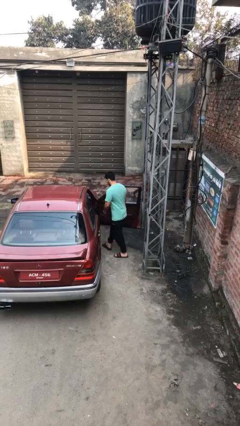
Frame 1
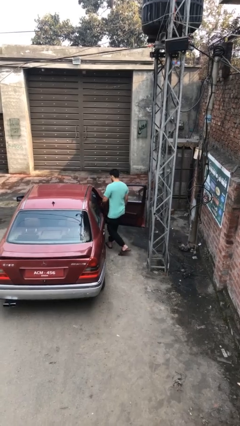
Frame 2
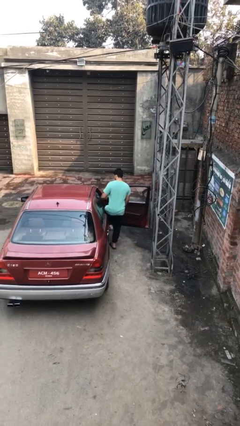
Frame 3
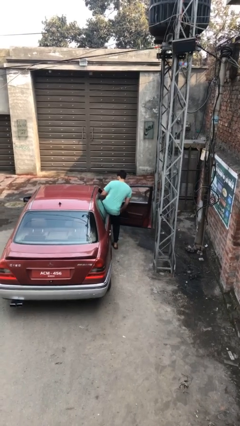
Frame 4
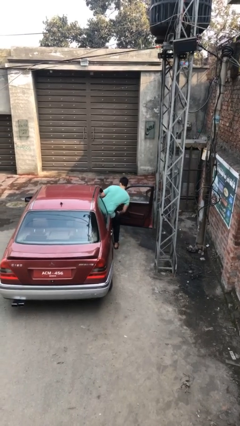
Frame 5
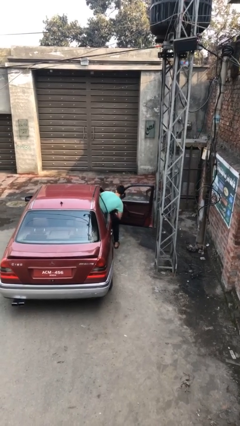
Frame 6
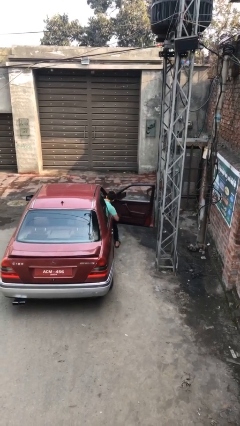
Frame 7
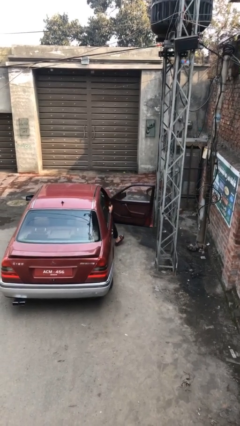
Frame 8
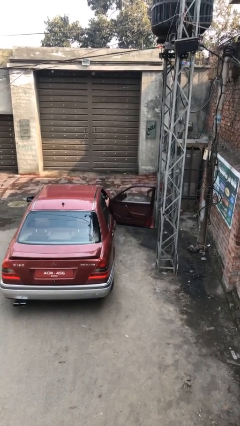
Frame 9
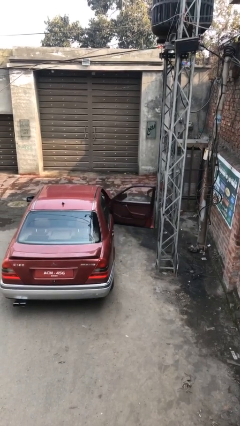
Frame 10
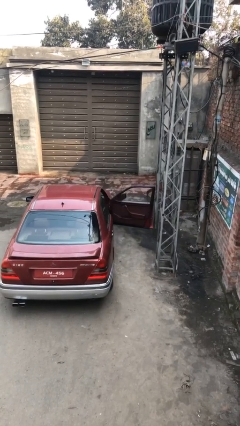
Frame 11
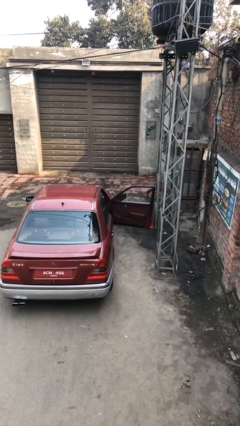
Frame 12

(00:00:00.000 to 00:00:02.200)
person enters car

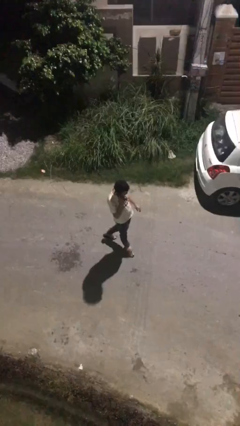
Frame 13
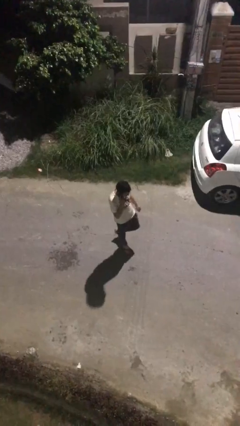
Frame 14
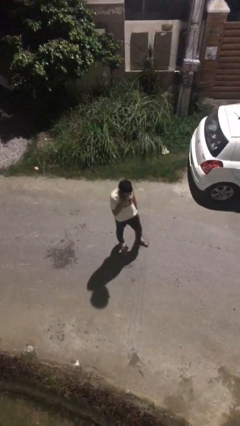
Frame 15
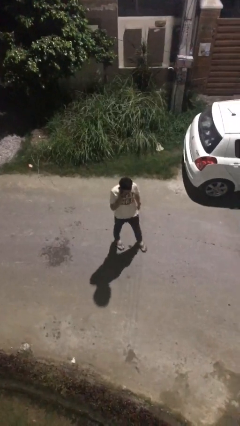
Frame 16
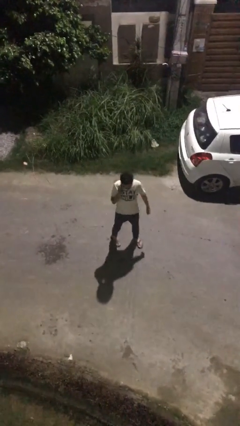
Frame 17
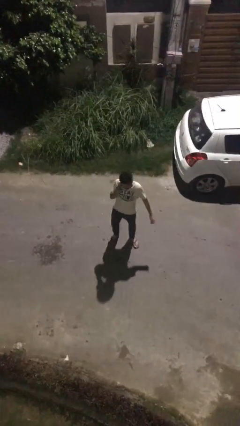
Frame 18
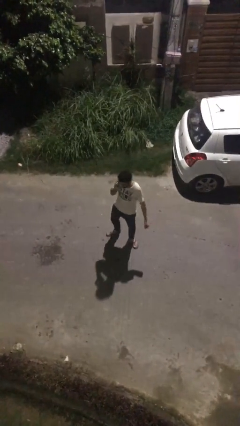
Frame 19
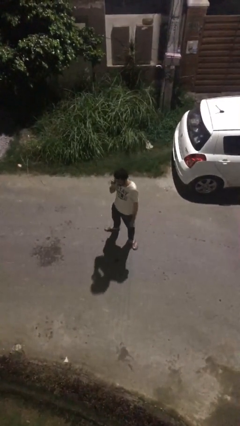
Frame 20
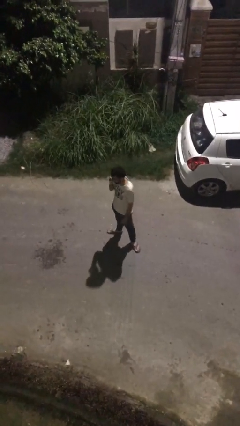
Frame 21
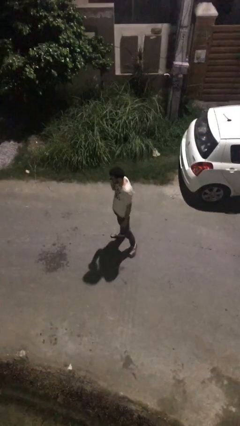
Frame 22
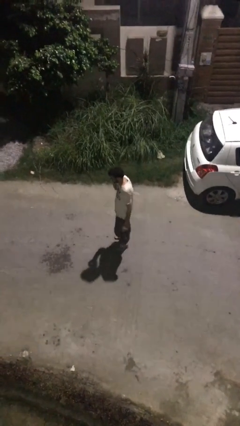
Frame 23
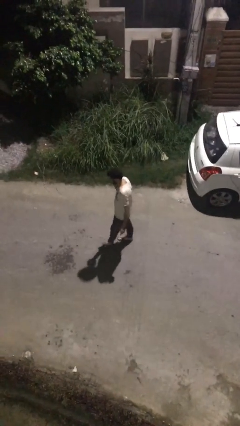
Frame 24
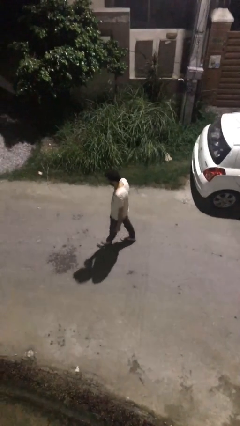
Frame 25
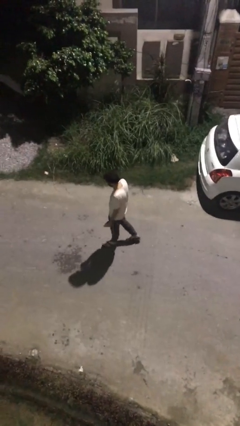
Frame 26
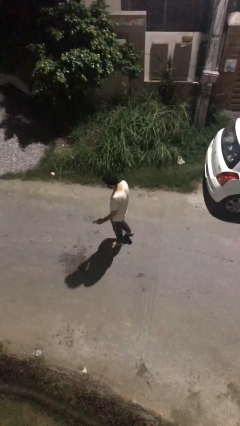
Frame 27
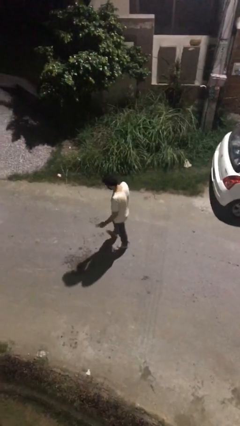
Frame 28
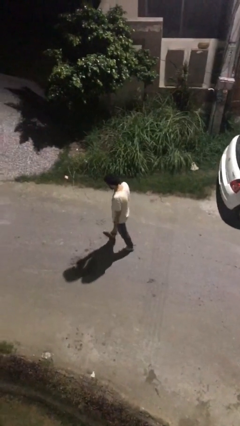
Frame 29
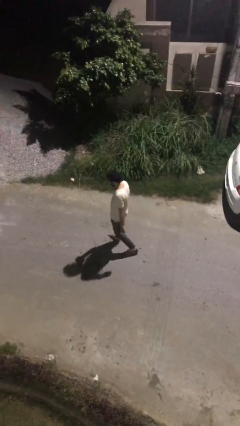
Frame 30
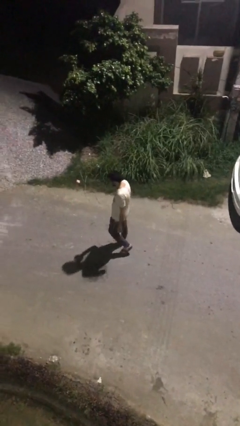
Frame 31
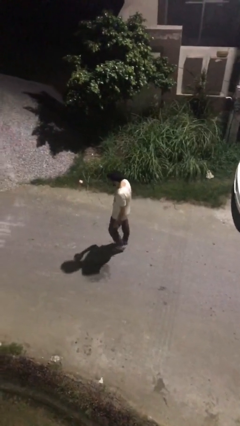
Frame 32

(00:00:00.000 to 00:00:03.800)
person talks on phone

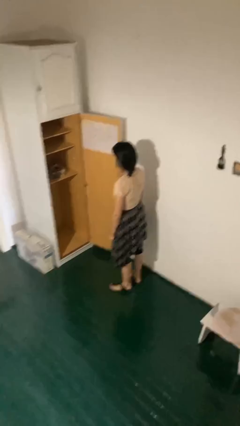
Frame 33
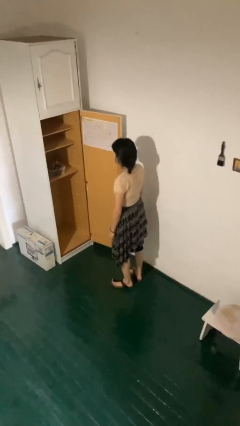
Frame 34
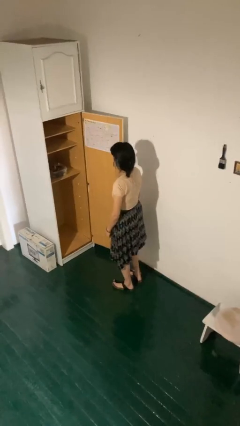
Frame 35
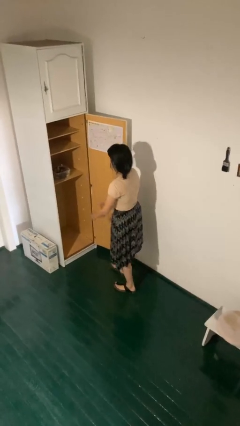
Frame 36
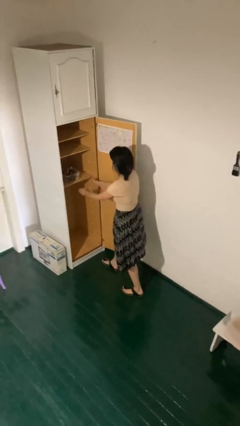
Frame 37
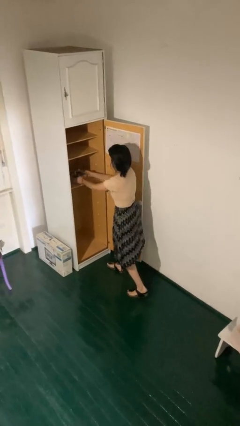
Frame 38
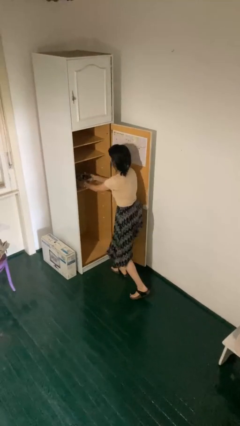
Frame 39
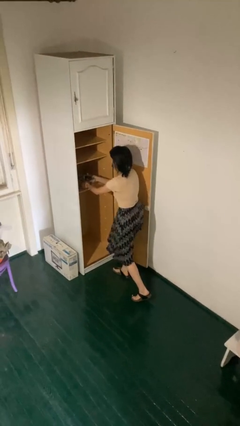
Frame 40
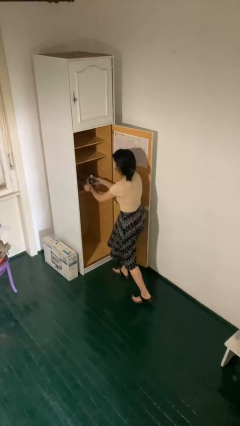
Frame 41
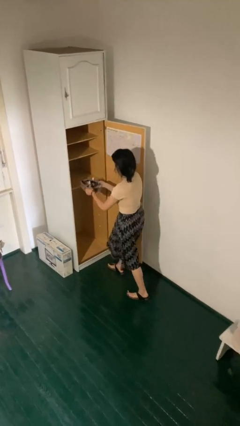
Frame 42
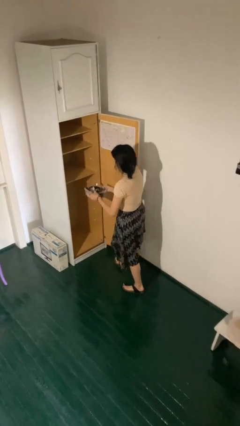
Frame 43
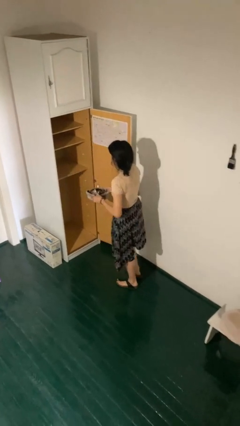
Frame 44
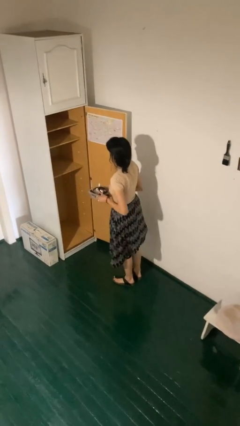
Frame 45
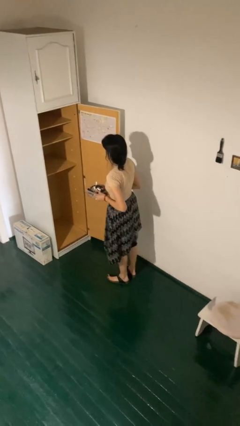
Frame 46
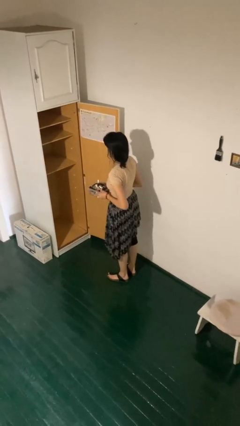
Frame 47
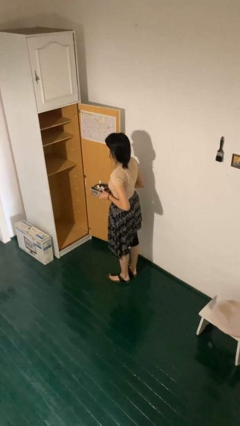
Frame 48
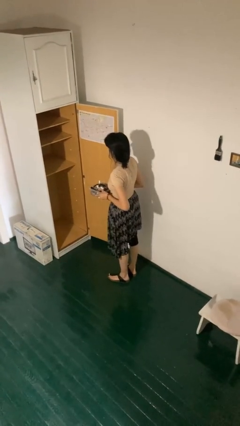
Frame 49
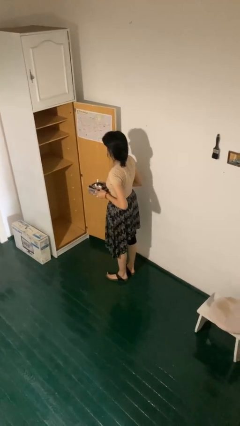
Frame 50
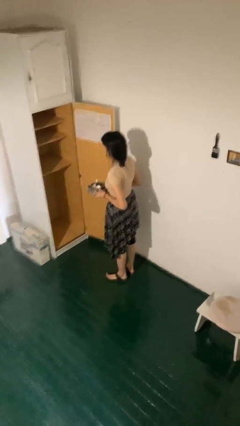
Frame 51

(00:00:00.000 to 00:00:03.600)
person picks up object from cabinet

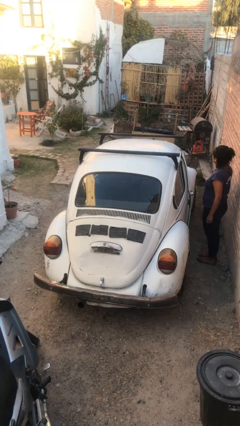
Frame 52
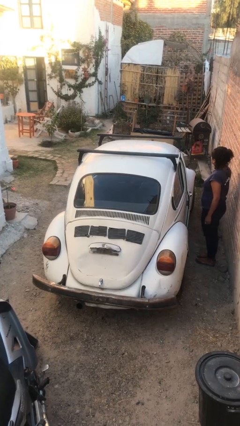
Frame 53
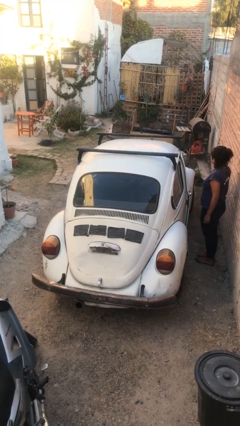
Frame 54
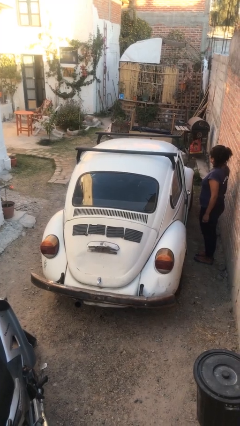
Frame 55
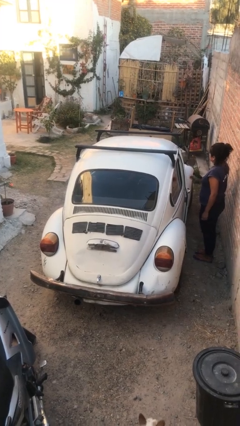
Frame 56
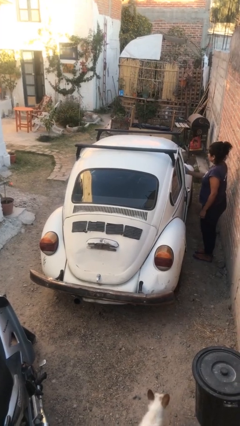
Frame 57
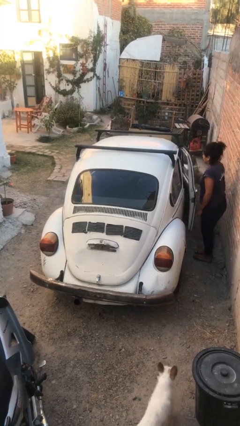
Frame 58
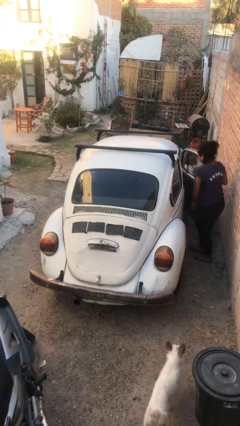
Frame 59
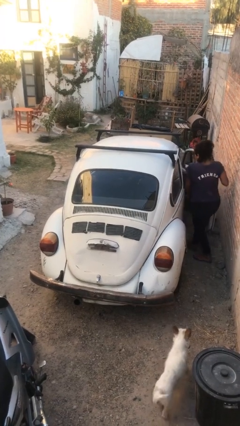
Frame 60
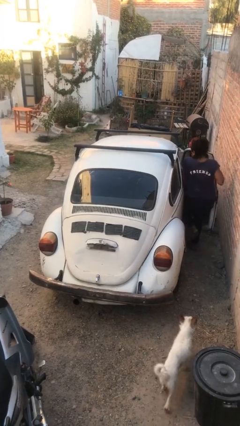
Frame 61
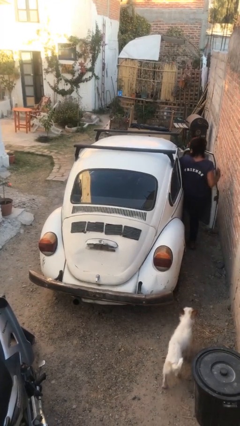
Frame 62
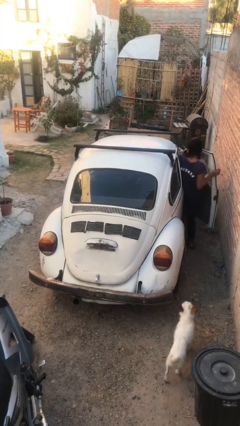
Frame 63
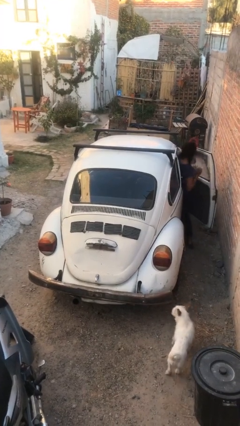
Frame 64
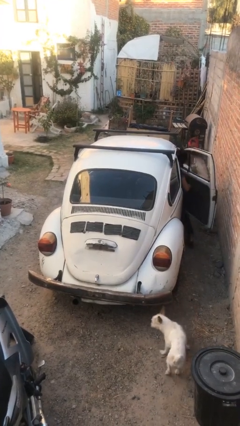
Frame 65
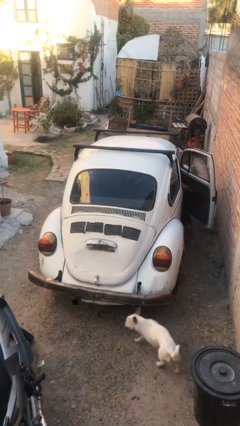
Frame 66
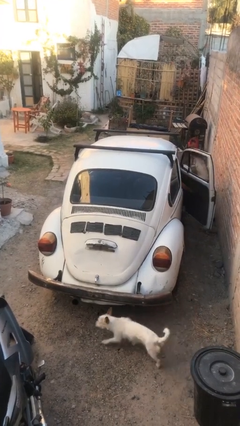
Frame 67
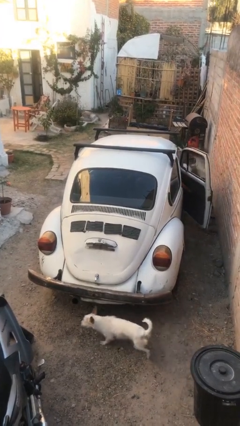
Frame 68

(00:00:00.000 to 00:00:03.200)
car picks up person

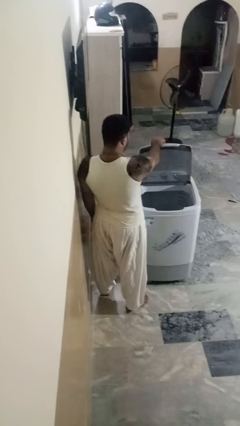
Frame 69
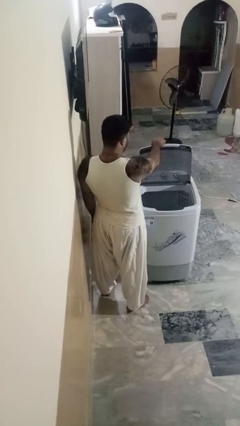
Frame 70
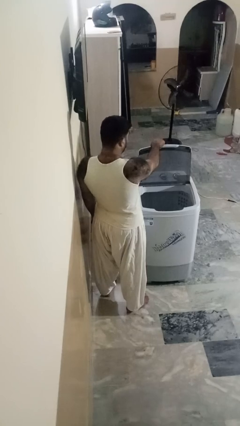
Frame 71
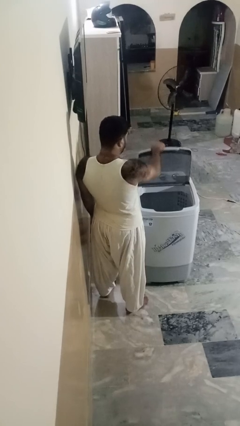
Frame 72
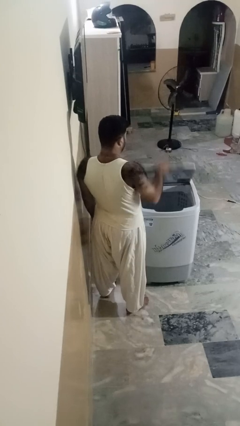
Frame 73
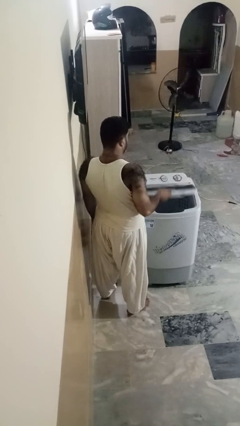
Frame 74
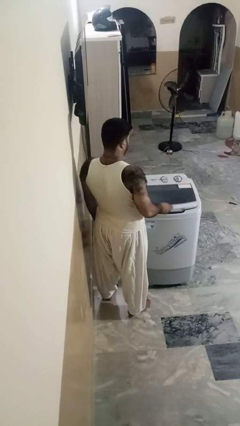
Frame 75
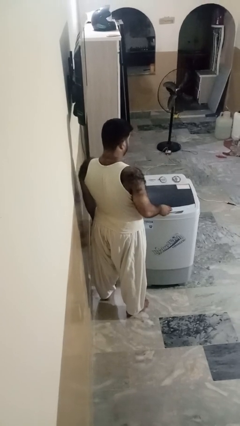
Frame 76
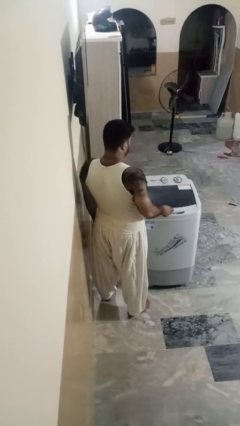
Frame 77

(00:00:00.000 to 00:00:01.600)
person closes clothes washer

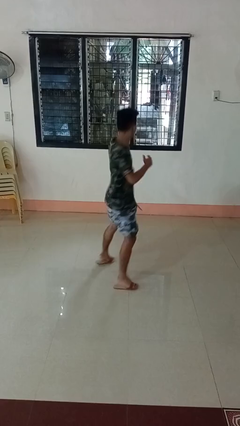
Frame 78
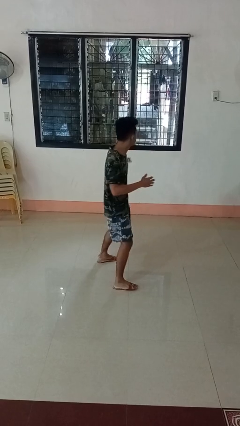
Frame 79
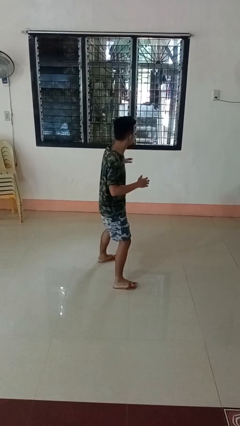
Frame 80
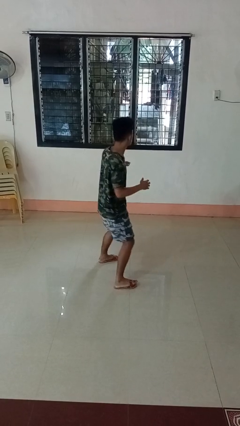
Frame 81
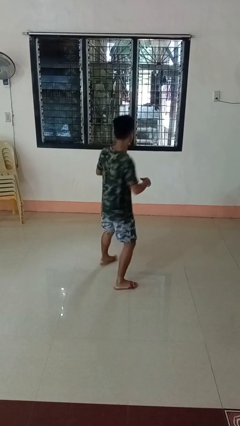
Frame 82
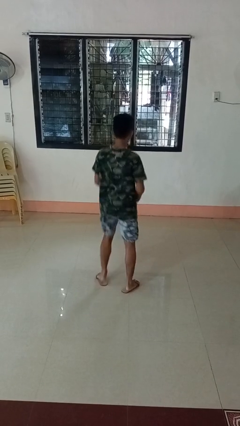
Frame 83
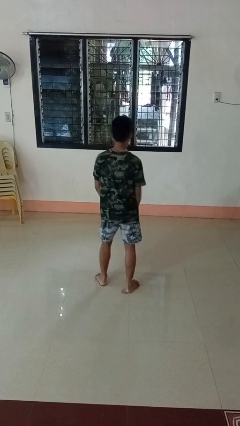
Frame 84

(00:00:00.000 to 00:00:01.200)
person karate chop

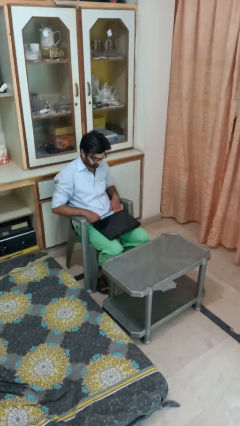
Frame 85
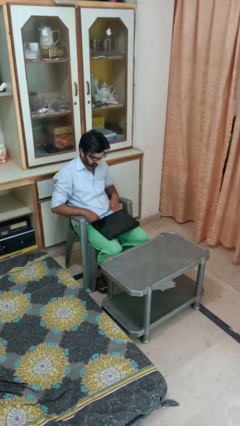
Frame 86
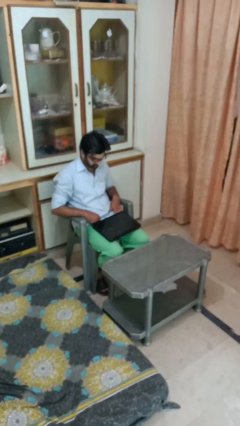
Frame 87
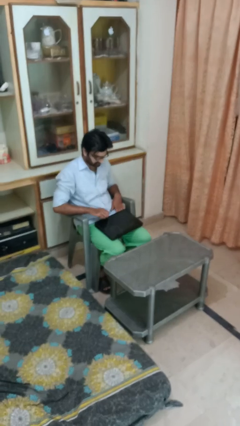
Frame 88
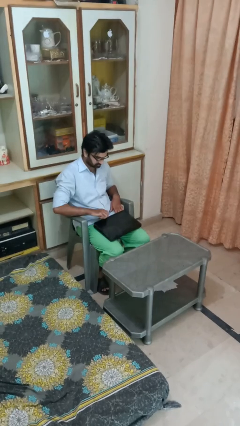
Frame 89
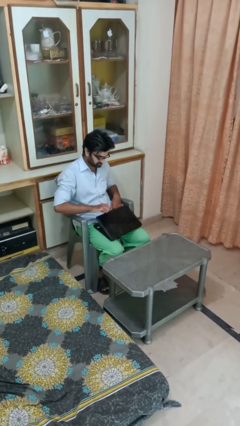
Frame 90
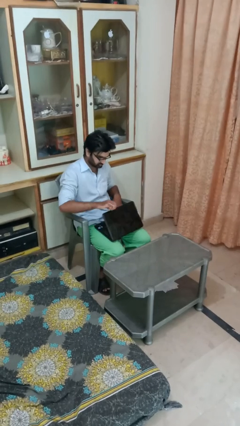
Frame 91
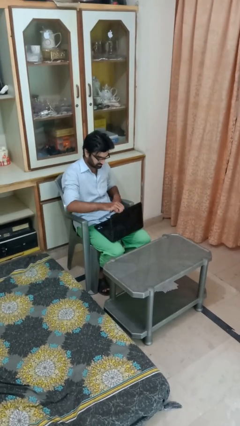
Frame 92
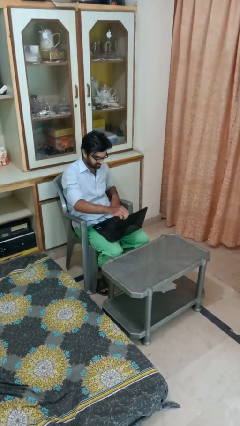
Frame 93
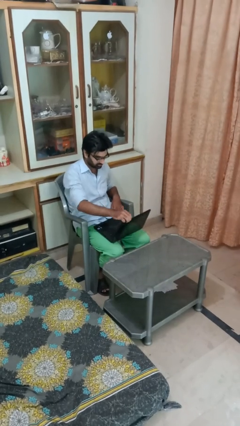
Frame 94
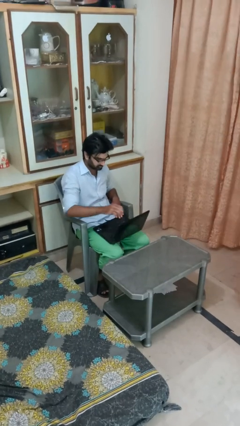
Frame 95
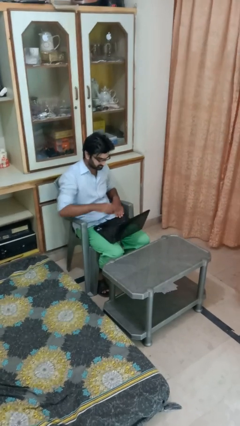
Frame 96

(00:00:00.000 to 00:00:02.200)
person opens laptop
